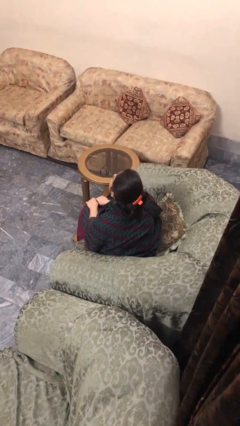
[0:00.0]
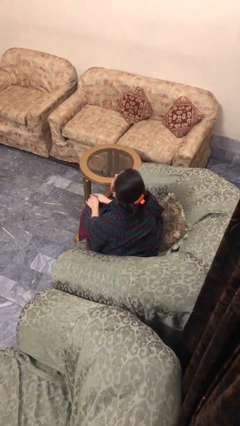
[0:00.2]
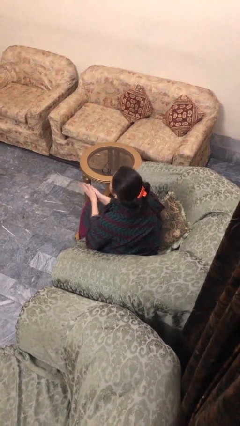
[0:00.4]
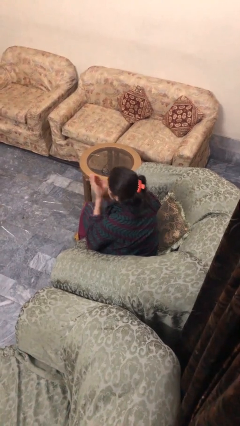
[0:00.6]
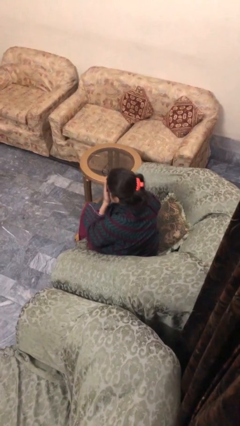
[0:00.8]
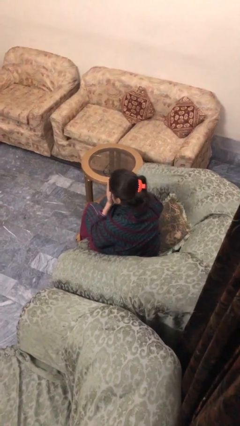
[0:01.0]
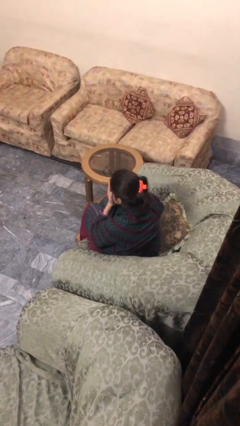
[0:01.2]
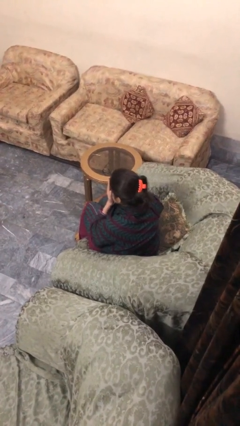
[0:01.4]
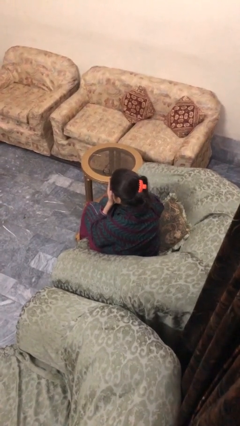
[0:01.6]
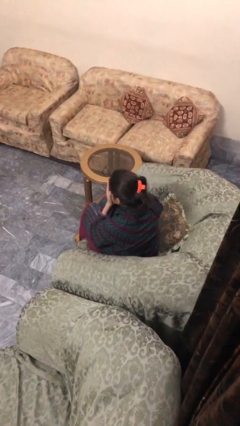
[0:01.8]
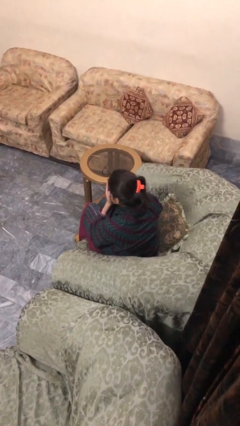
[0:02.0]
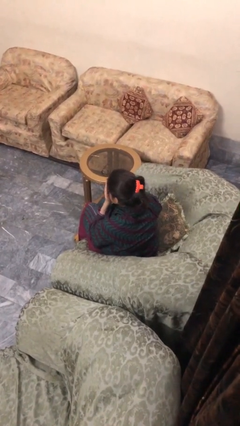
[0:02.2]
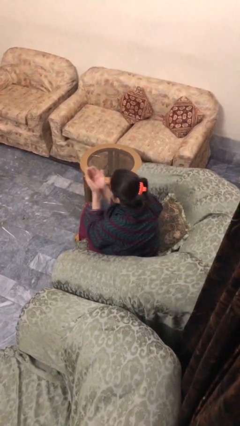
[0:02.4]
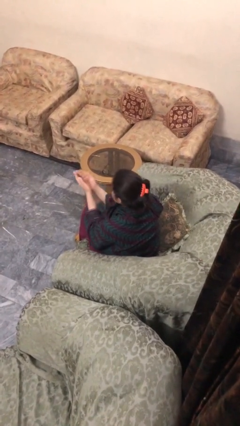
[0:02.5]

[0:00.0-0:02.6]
person covers face with hands

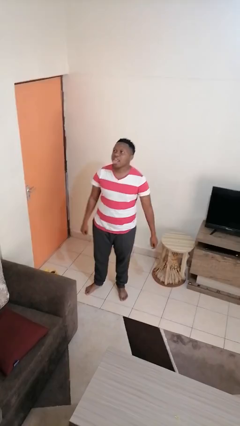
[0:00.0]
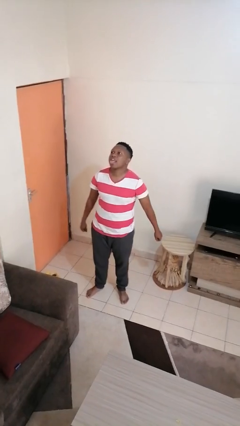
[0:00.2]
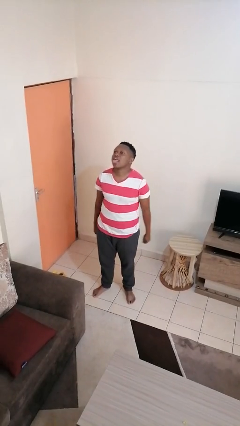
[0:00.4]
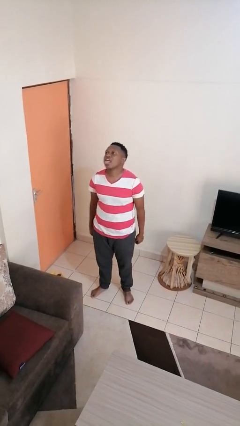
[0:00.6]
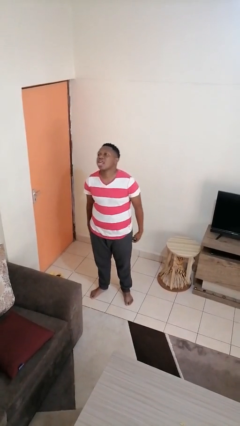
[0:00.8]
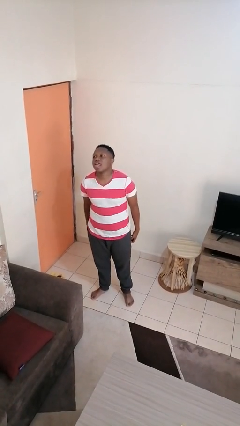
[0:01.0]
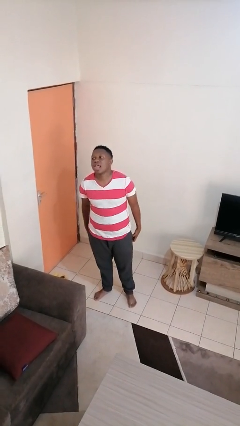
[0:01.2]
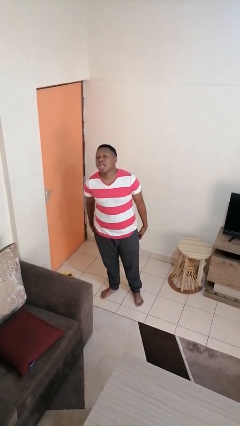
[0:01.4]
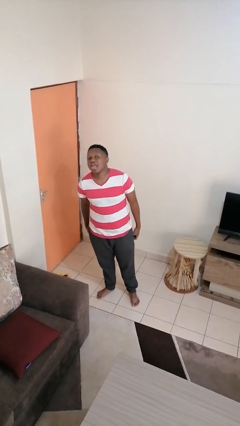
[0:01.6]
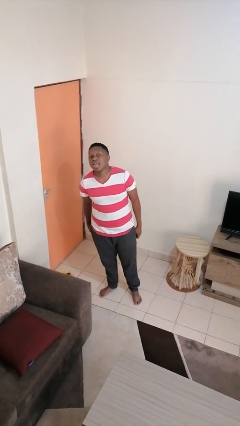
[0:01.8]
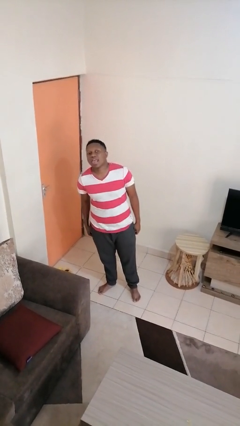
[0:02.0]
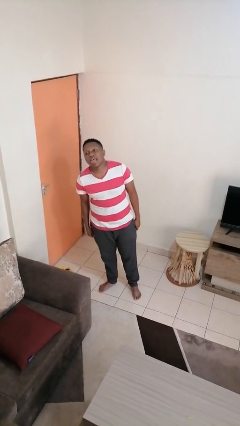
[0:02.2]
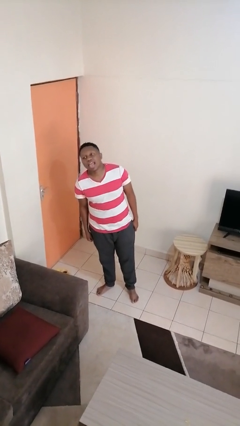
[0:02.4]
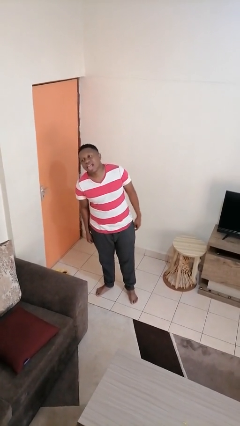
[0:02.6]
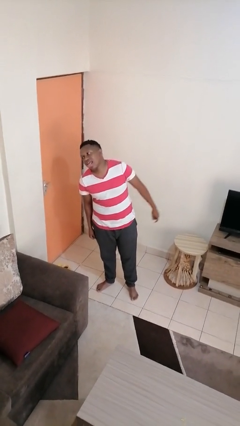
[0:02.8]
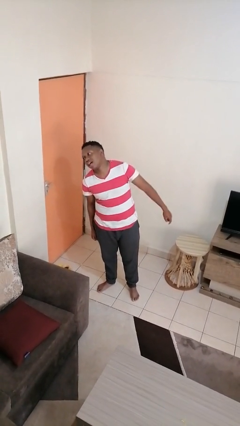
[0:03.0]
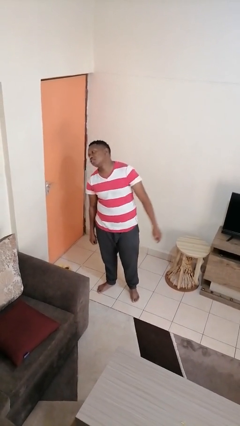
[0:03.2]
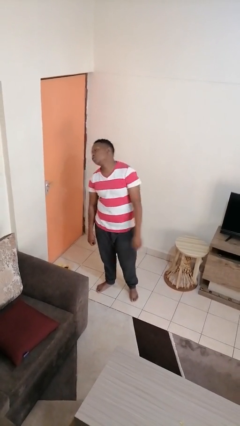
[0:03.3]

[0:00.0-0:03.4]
person sticks out tongue

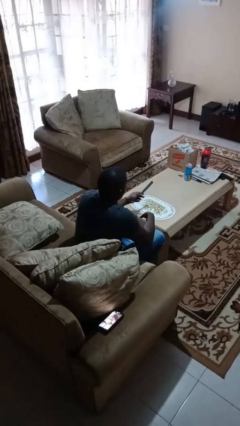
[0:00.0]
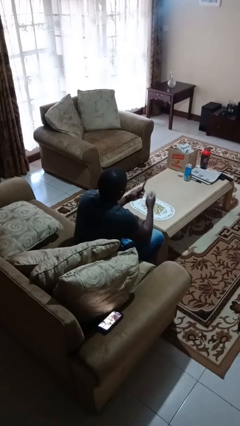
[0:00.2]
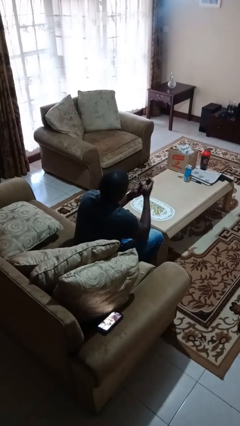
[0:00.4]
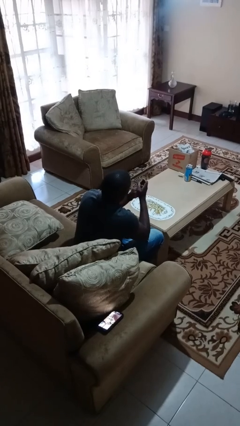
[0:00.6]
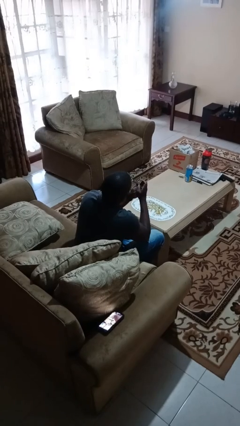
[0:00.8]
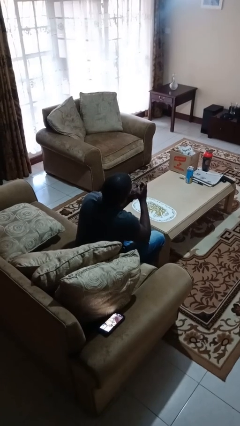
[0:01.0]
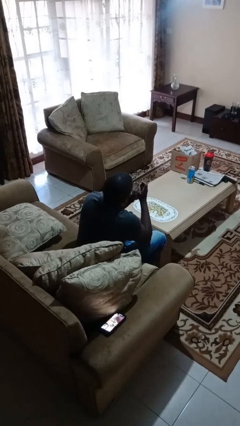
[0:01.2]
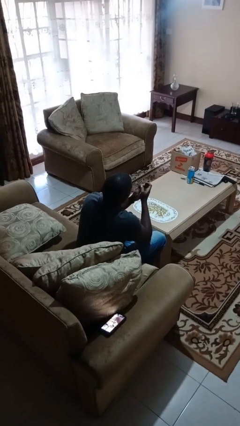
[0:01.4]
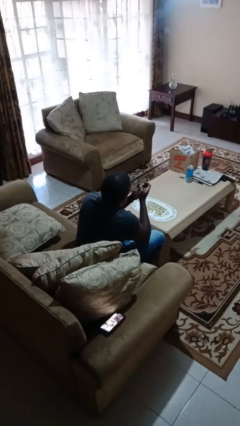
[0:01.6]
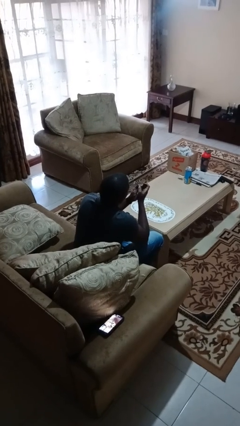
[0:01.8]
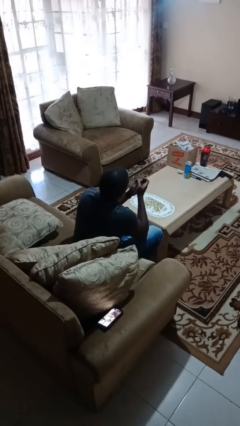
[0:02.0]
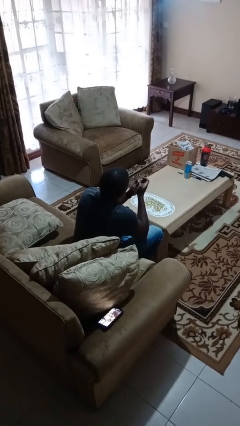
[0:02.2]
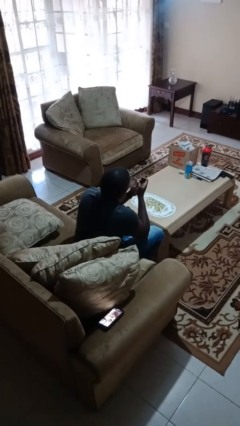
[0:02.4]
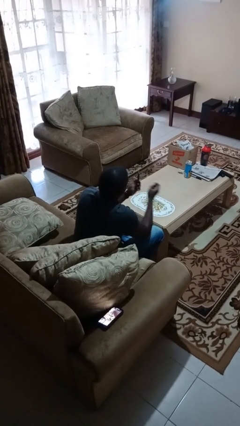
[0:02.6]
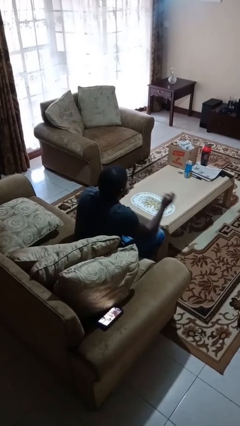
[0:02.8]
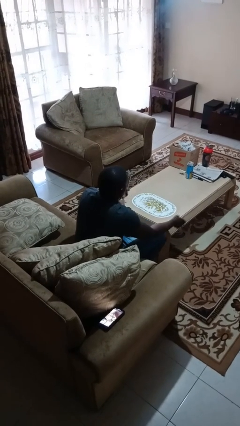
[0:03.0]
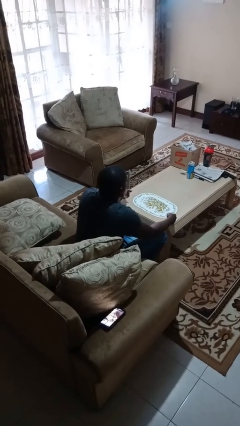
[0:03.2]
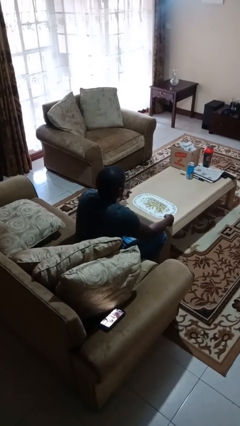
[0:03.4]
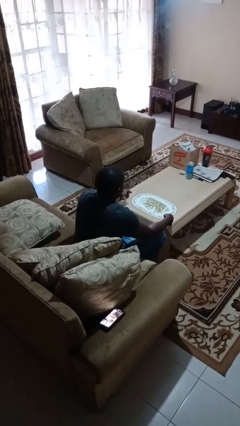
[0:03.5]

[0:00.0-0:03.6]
person files fingernails

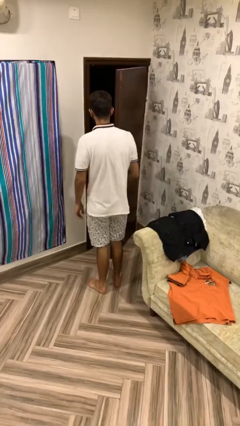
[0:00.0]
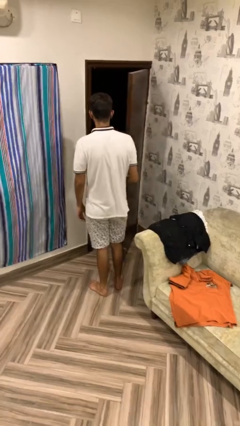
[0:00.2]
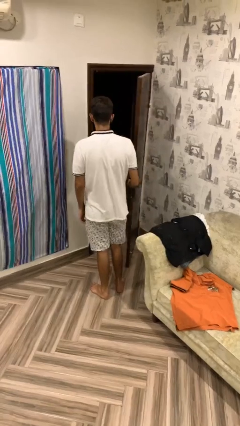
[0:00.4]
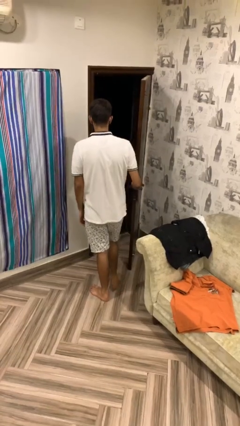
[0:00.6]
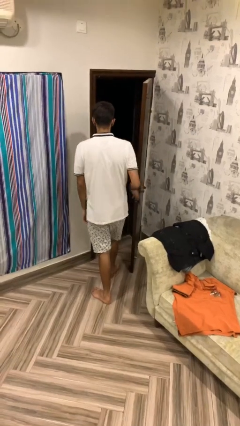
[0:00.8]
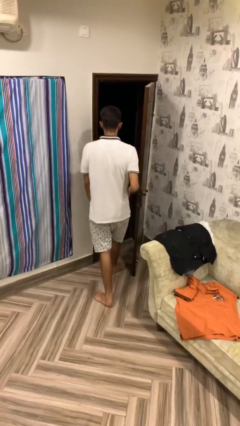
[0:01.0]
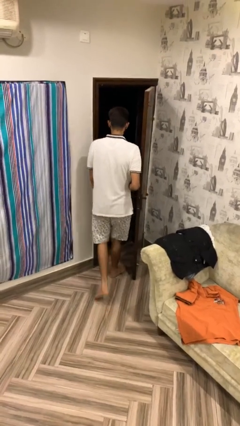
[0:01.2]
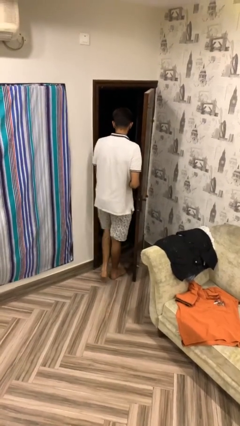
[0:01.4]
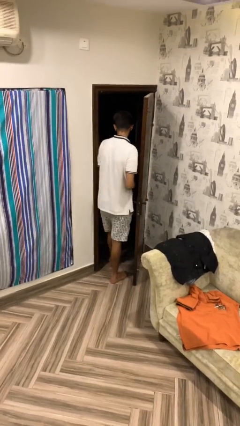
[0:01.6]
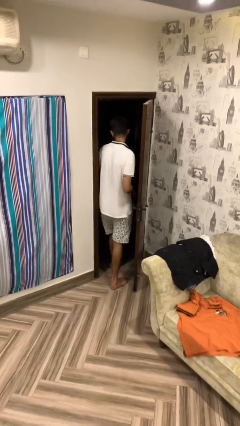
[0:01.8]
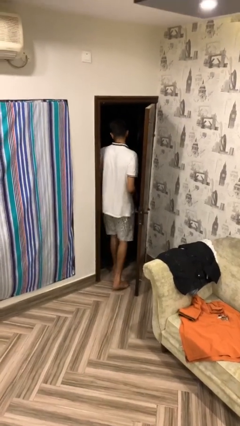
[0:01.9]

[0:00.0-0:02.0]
person exits scene through structure

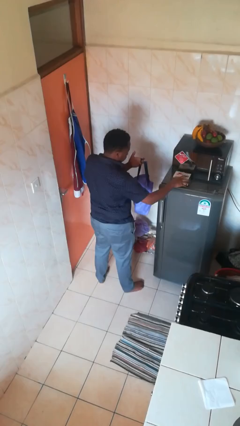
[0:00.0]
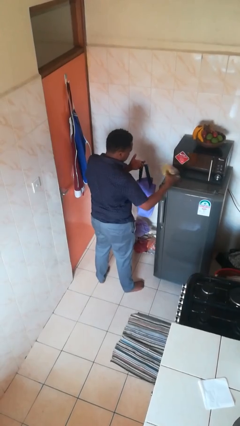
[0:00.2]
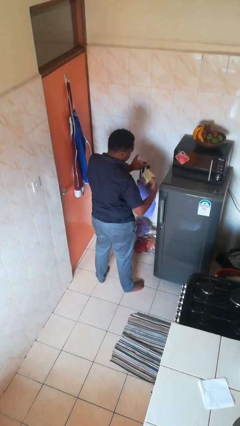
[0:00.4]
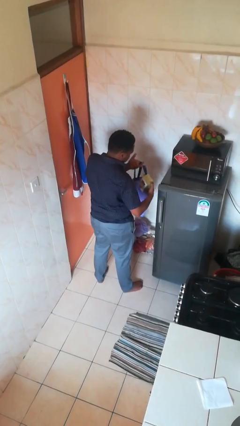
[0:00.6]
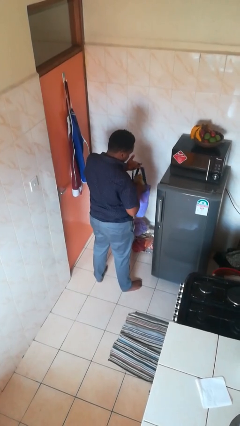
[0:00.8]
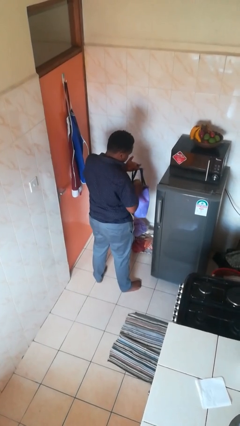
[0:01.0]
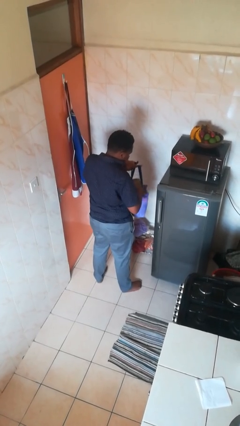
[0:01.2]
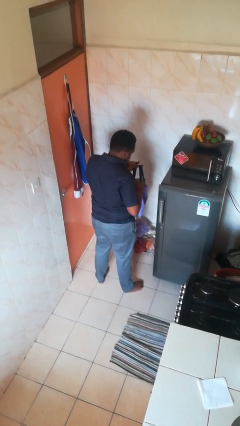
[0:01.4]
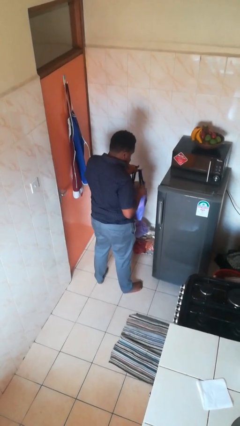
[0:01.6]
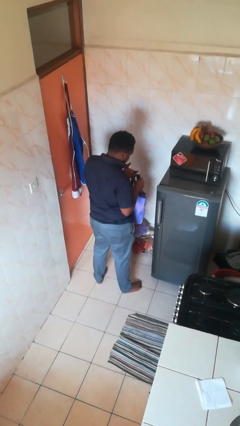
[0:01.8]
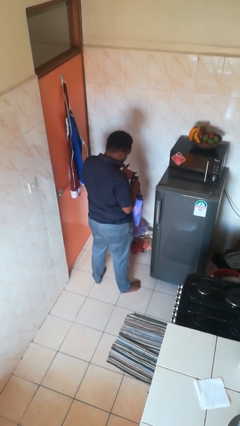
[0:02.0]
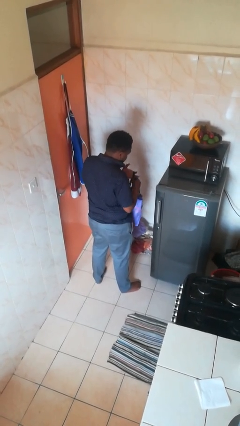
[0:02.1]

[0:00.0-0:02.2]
person puts object into bag

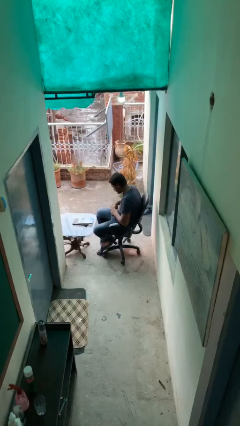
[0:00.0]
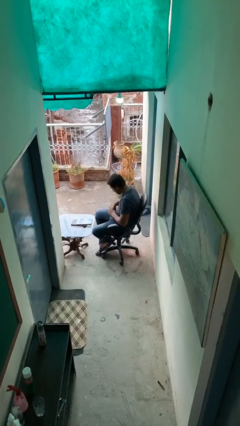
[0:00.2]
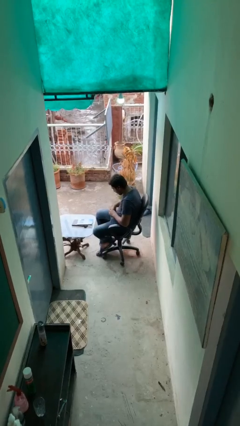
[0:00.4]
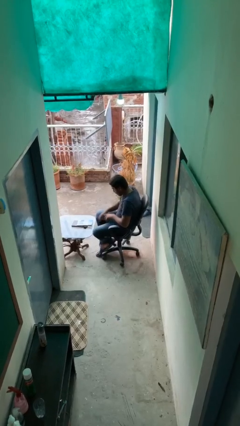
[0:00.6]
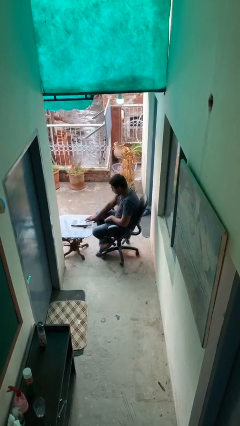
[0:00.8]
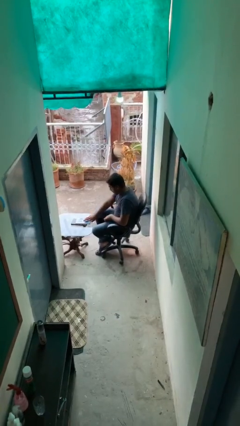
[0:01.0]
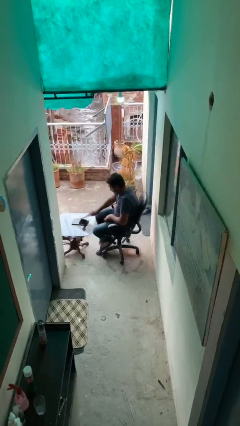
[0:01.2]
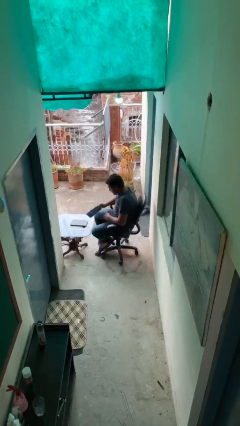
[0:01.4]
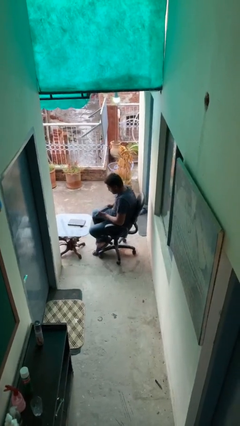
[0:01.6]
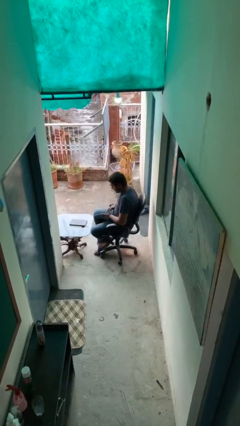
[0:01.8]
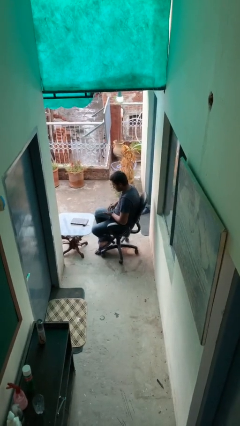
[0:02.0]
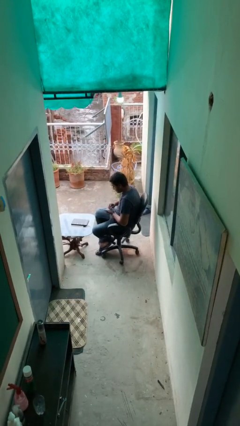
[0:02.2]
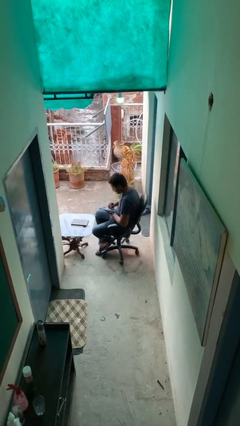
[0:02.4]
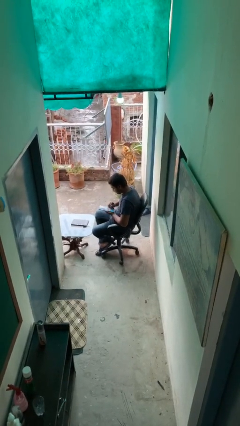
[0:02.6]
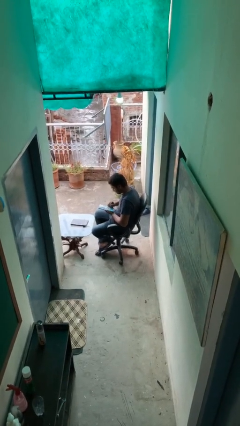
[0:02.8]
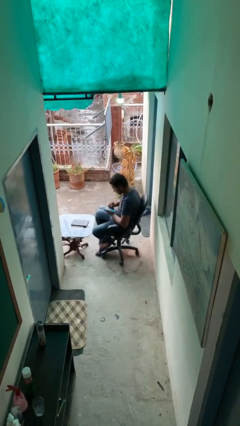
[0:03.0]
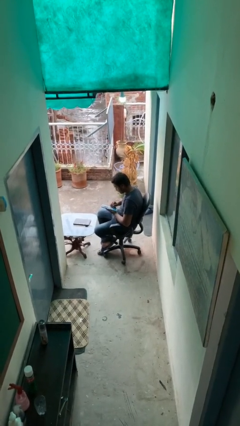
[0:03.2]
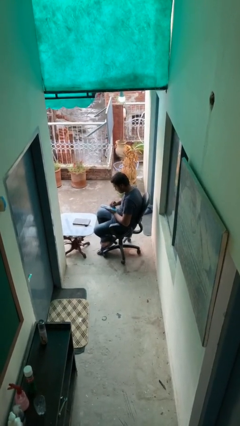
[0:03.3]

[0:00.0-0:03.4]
person picks up object from table

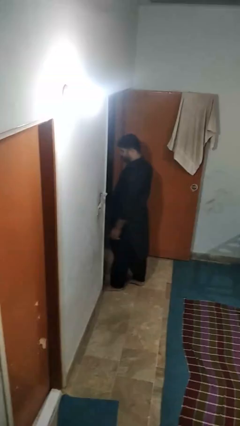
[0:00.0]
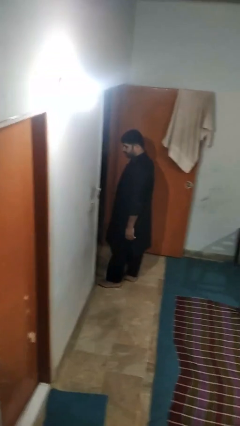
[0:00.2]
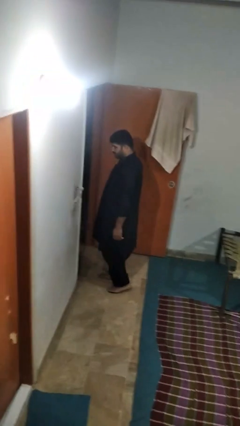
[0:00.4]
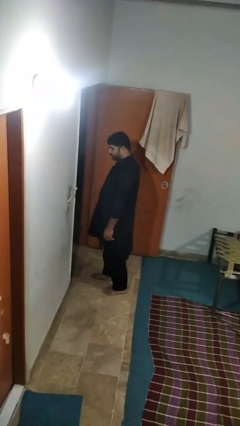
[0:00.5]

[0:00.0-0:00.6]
person bumps into wall
